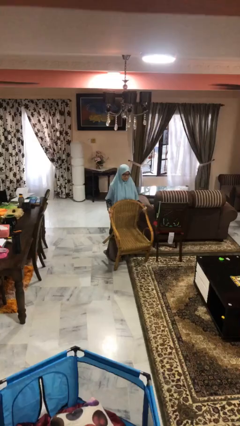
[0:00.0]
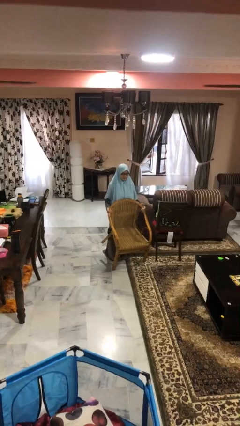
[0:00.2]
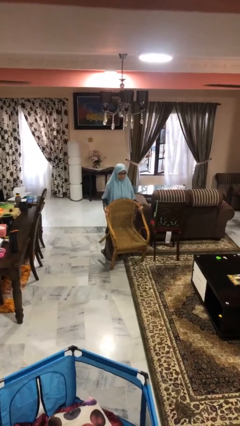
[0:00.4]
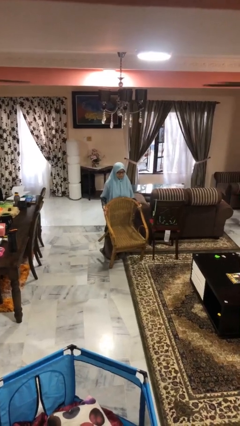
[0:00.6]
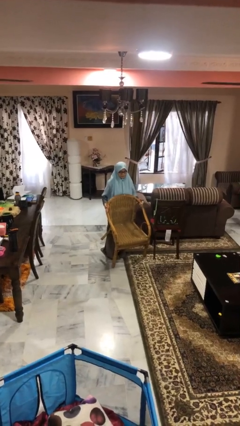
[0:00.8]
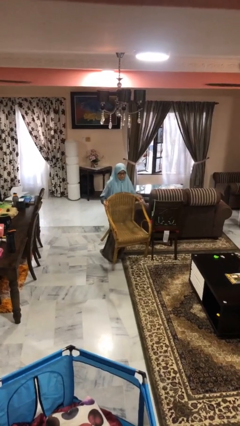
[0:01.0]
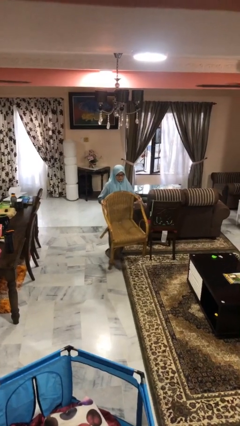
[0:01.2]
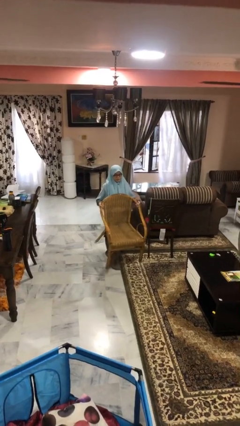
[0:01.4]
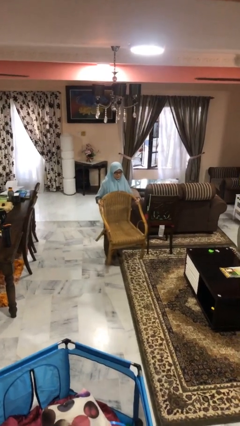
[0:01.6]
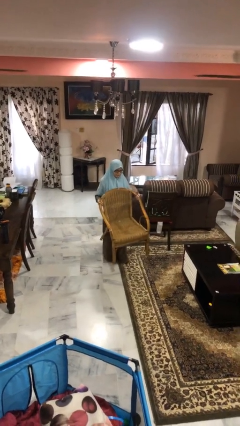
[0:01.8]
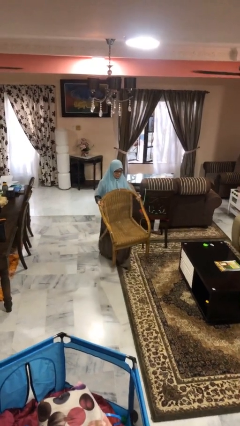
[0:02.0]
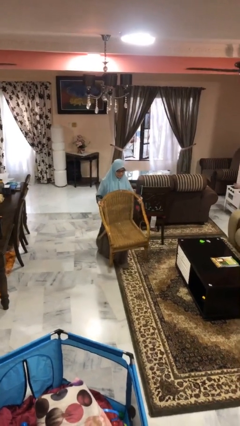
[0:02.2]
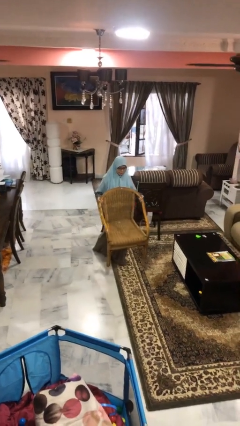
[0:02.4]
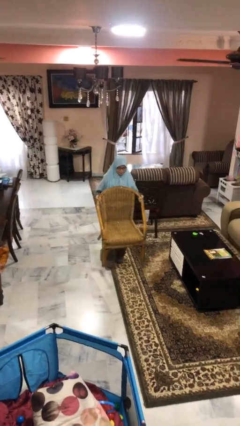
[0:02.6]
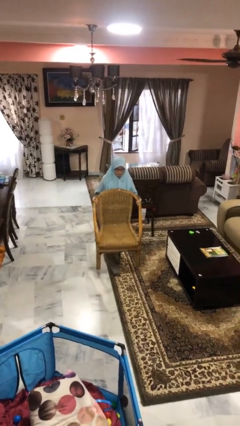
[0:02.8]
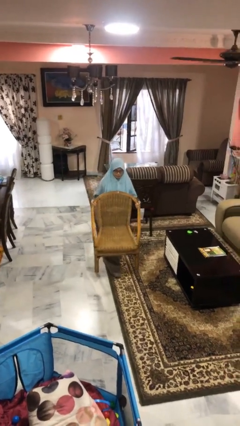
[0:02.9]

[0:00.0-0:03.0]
person carries furniture

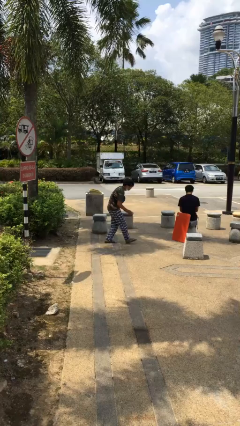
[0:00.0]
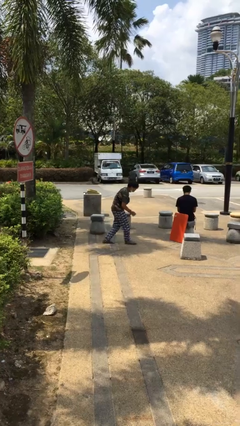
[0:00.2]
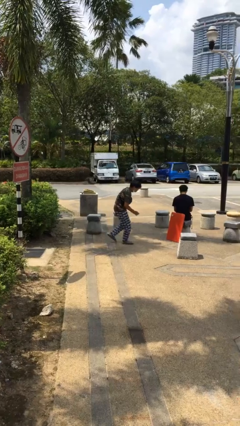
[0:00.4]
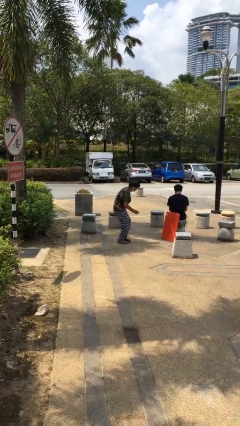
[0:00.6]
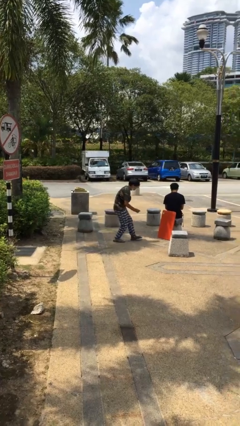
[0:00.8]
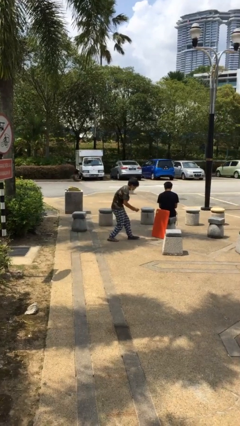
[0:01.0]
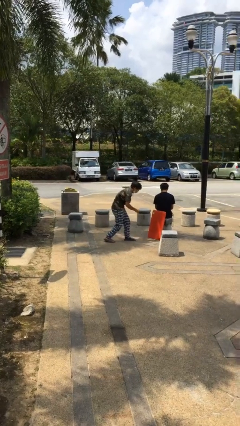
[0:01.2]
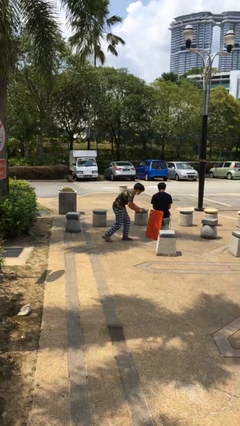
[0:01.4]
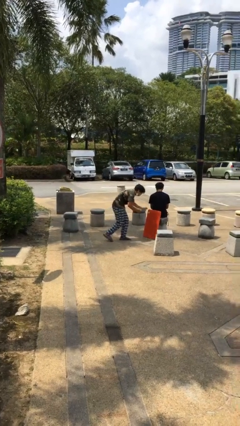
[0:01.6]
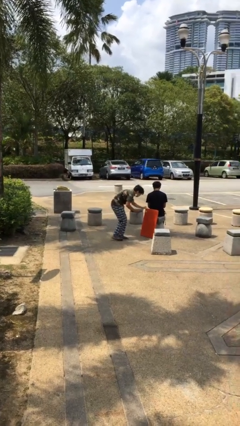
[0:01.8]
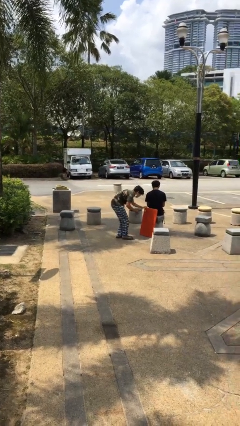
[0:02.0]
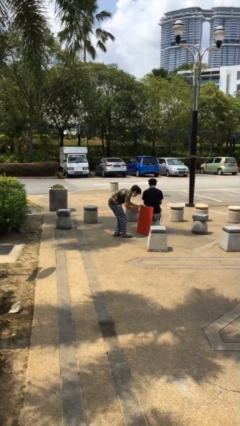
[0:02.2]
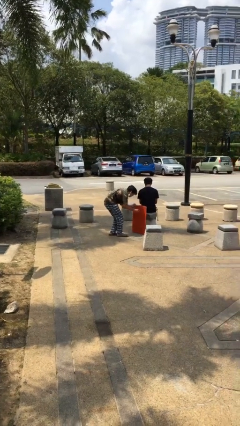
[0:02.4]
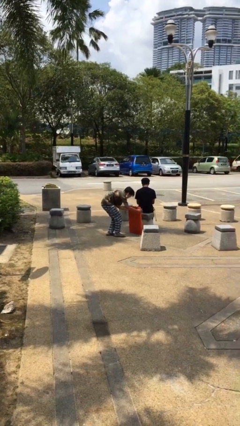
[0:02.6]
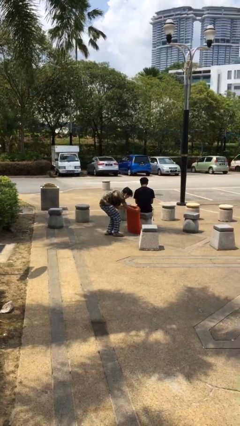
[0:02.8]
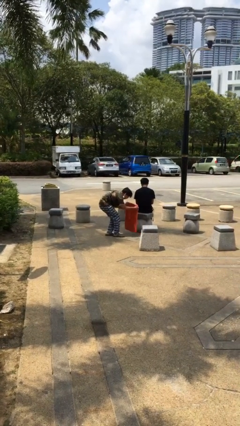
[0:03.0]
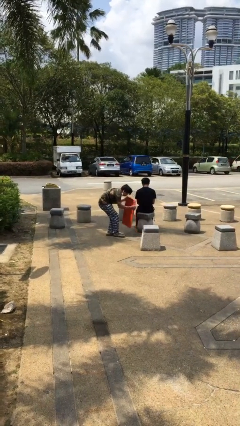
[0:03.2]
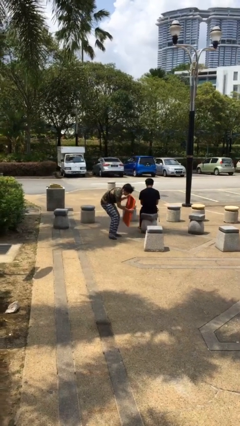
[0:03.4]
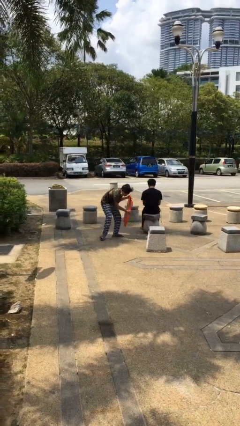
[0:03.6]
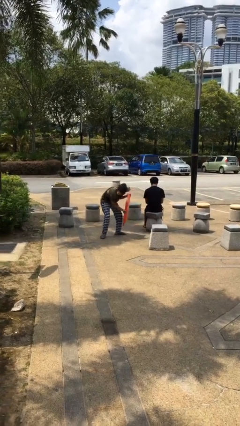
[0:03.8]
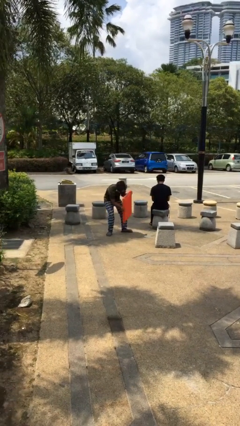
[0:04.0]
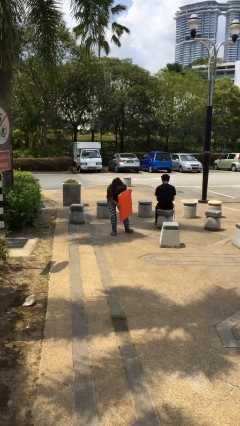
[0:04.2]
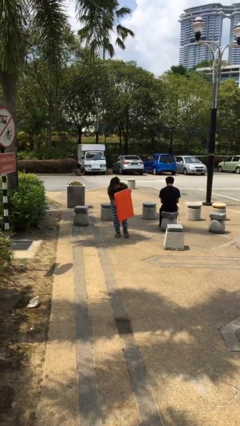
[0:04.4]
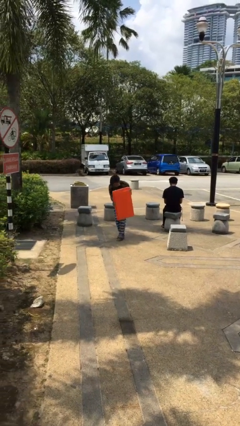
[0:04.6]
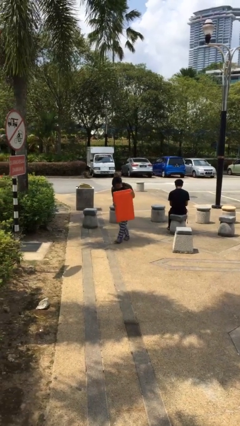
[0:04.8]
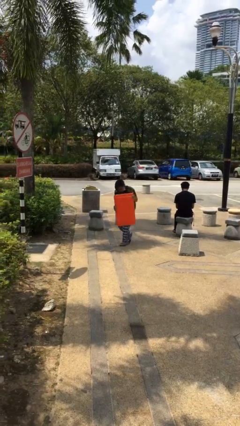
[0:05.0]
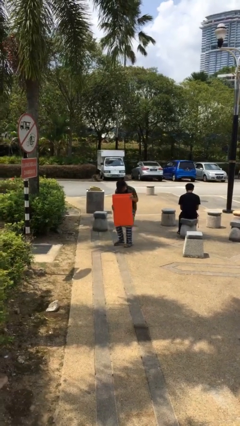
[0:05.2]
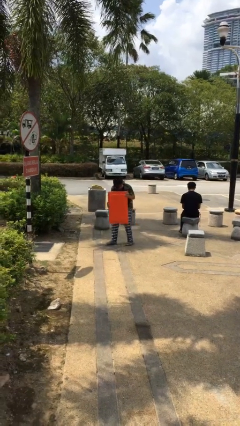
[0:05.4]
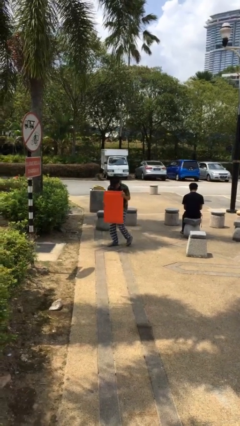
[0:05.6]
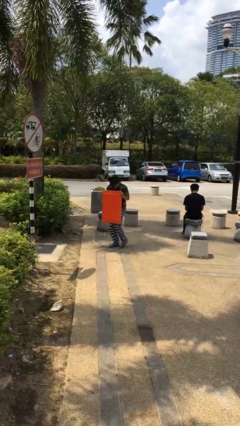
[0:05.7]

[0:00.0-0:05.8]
person steals object from person

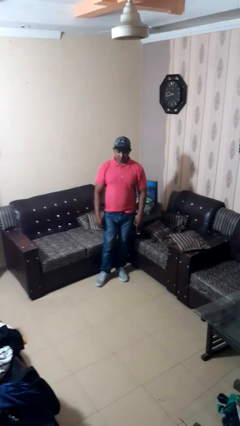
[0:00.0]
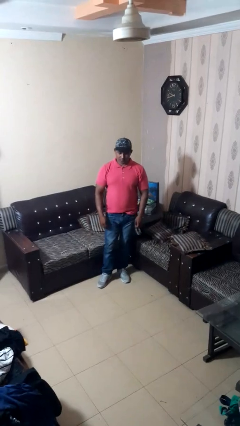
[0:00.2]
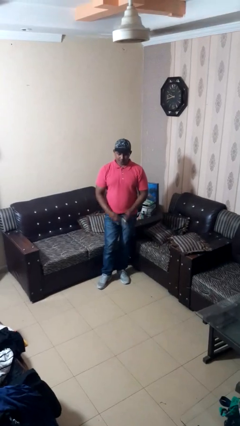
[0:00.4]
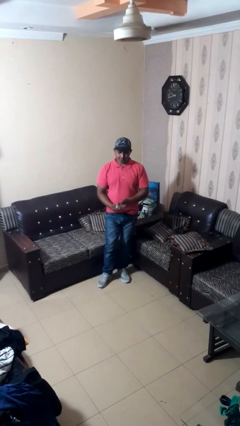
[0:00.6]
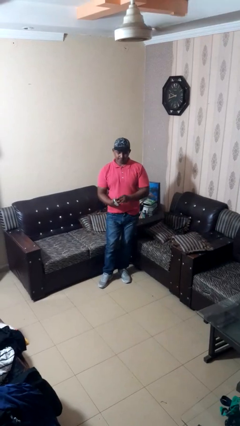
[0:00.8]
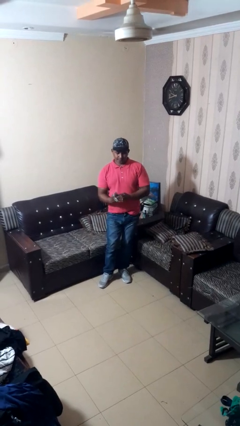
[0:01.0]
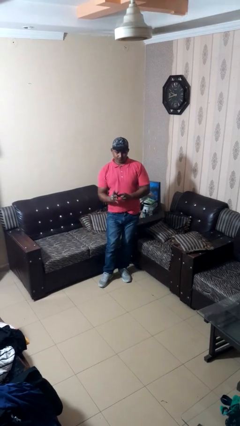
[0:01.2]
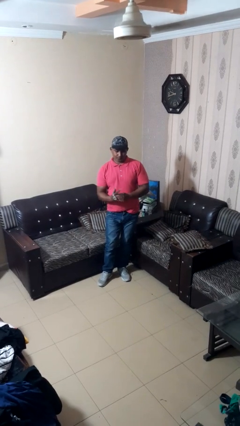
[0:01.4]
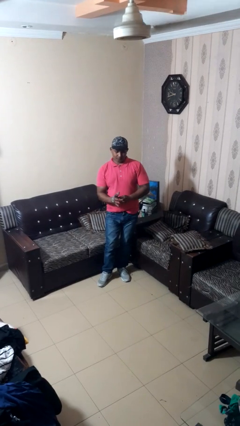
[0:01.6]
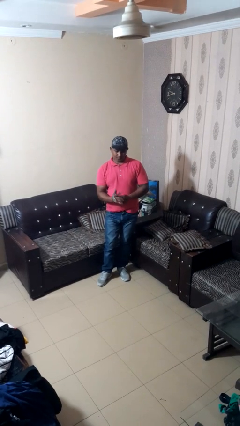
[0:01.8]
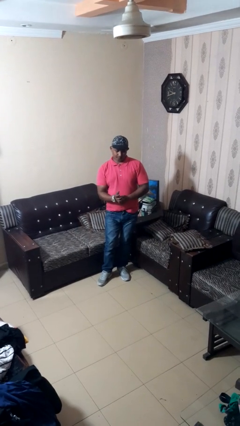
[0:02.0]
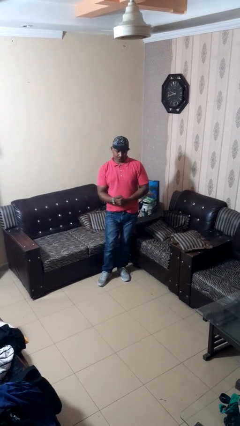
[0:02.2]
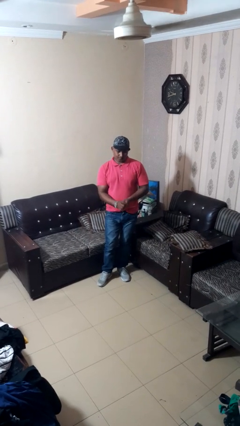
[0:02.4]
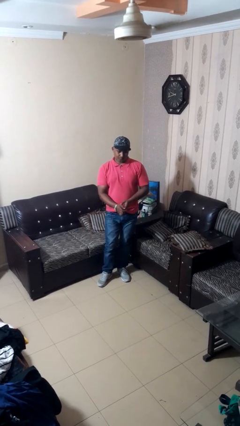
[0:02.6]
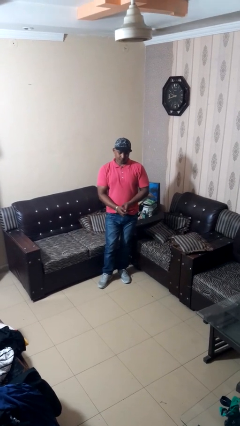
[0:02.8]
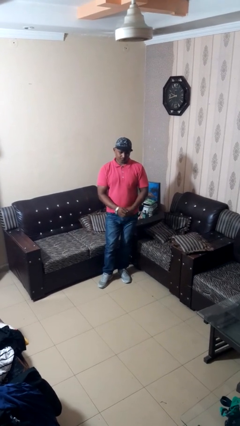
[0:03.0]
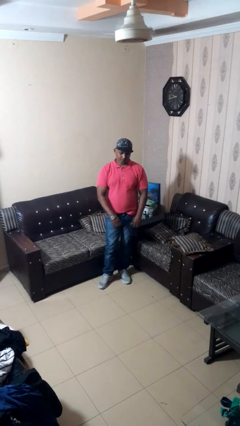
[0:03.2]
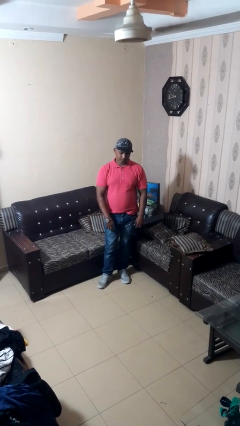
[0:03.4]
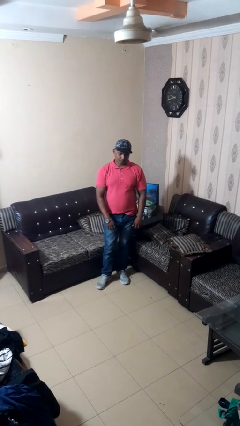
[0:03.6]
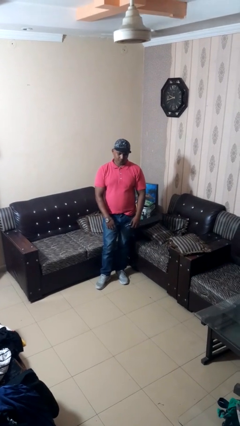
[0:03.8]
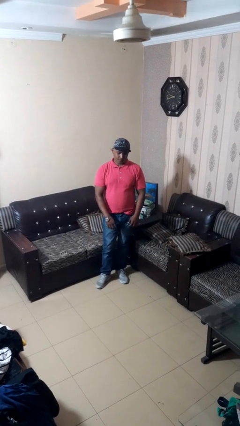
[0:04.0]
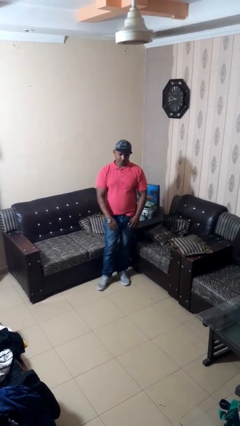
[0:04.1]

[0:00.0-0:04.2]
person puts on wristwatch

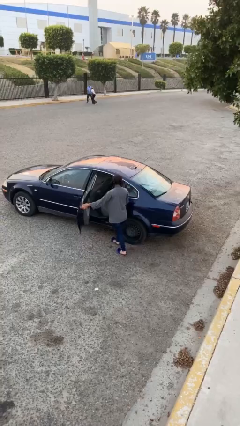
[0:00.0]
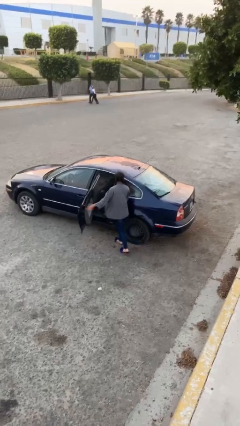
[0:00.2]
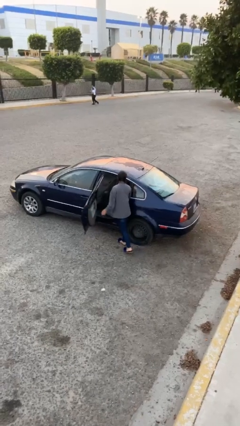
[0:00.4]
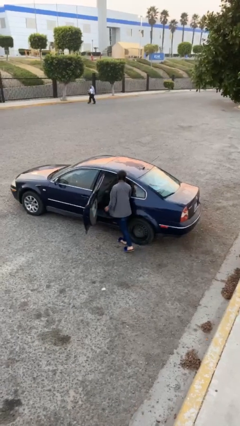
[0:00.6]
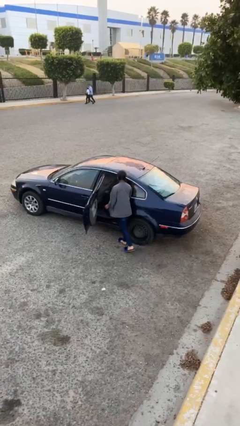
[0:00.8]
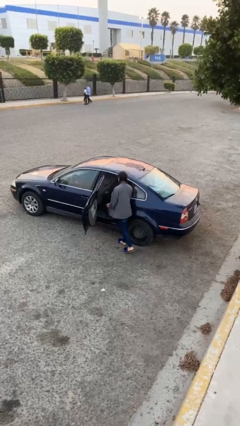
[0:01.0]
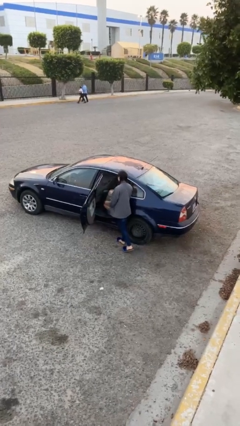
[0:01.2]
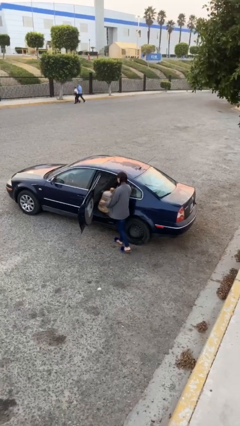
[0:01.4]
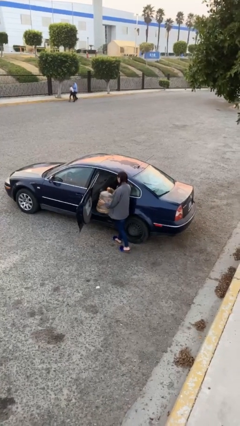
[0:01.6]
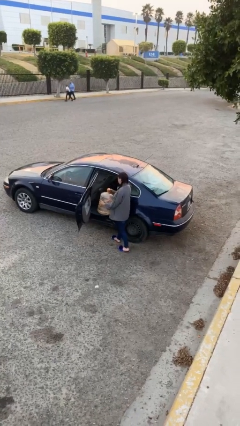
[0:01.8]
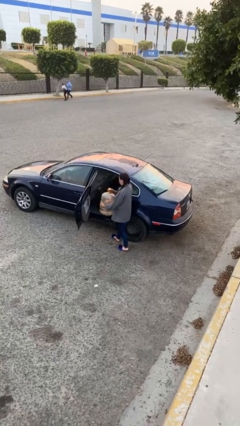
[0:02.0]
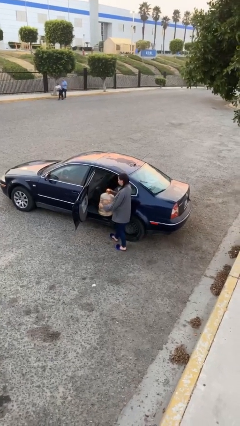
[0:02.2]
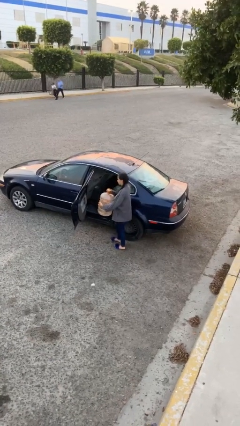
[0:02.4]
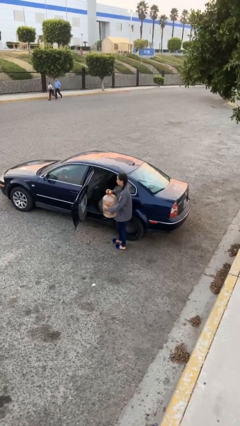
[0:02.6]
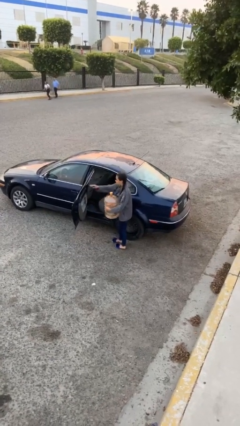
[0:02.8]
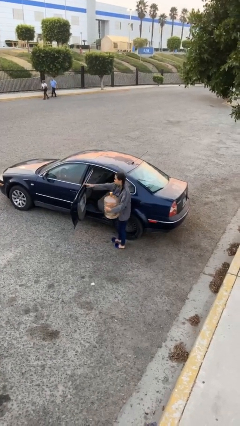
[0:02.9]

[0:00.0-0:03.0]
person unloads car

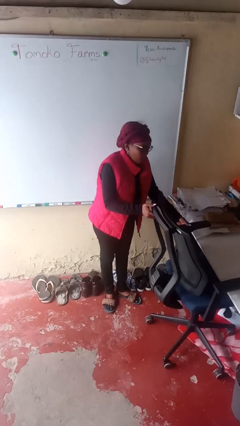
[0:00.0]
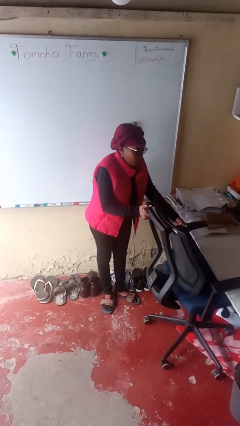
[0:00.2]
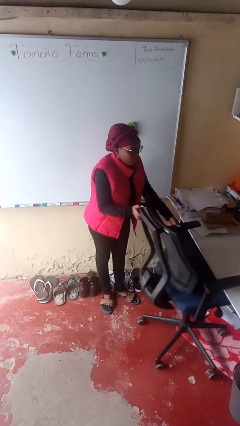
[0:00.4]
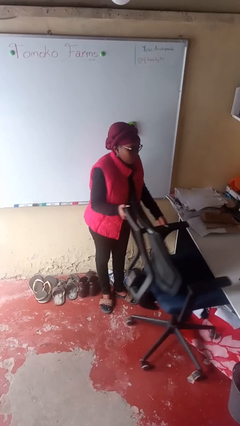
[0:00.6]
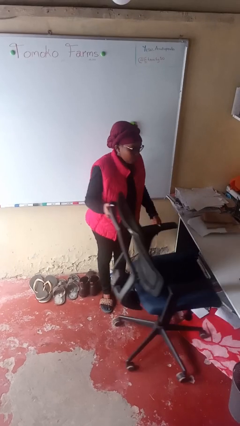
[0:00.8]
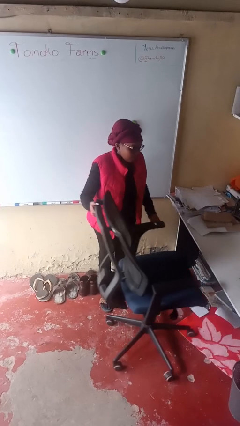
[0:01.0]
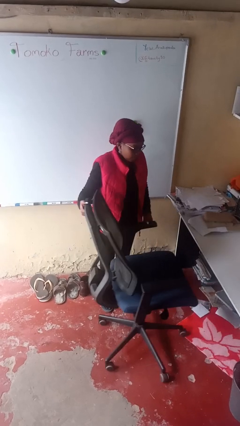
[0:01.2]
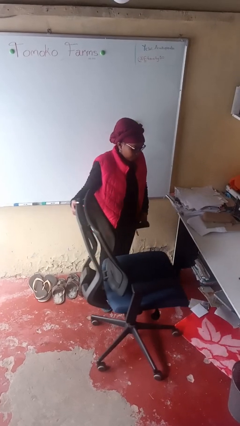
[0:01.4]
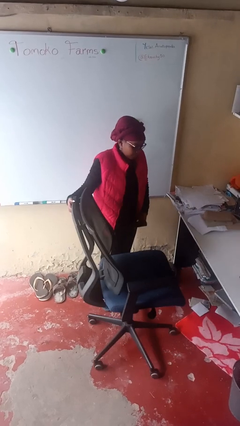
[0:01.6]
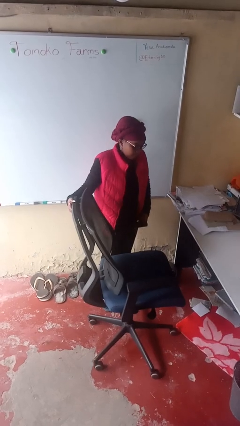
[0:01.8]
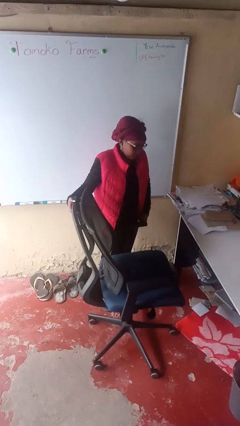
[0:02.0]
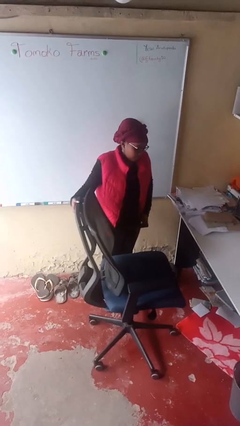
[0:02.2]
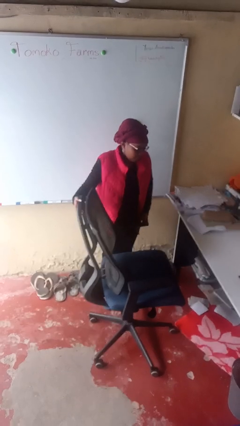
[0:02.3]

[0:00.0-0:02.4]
person pulls out chair
